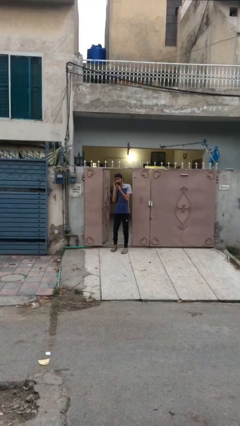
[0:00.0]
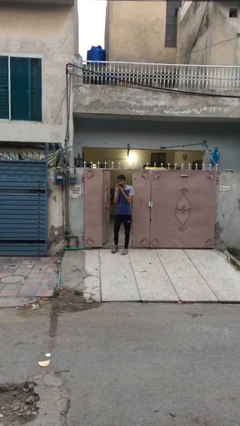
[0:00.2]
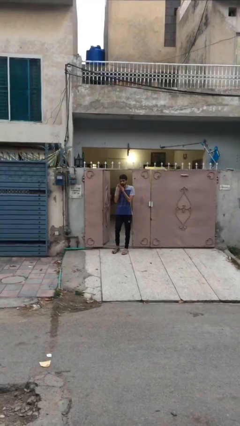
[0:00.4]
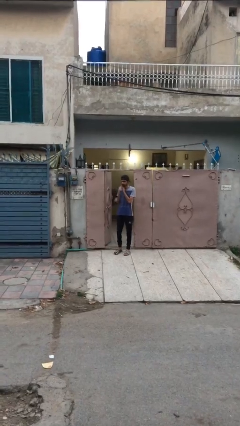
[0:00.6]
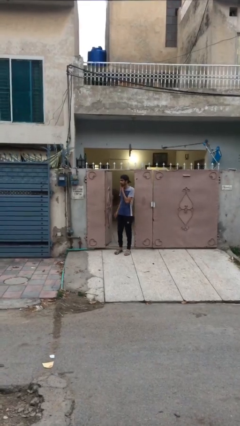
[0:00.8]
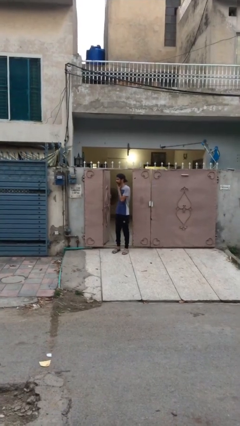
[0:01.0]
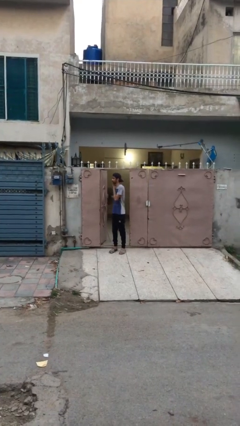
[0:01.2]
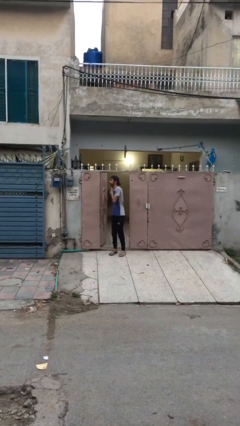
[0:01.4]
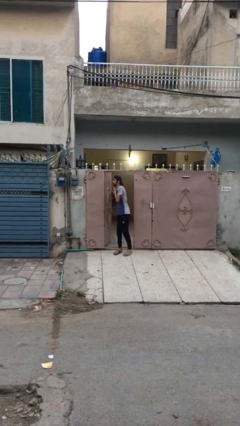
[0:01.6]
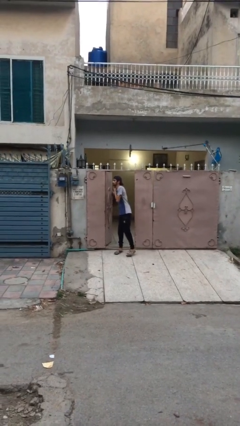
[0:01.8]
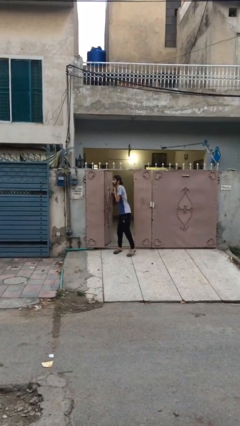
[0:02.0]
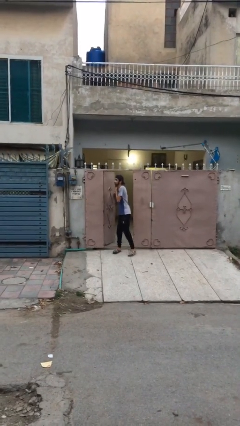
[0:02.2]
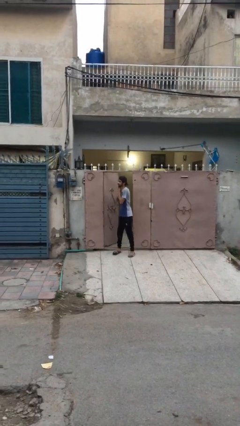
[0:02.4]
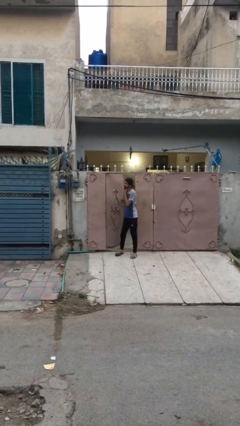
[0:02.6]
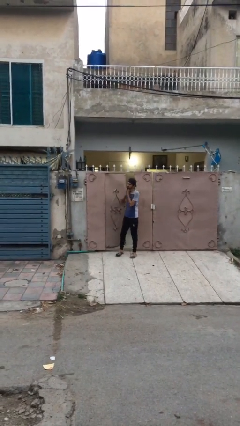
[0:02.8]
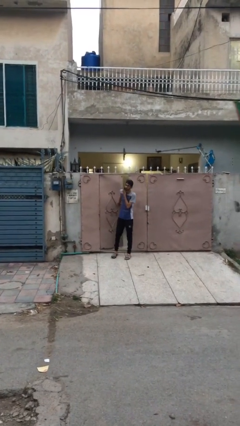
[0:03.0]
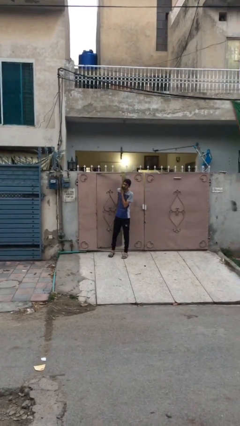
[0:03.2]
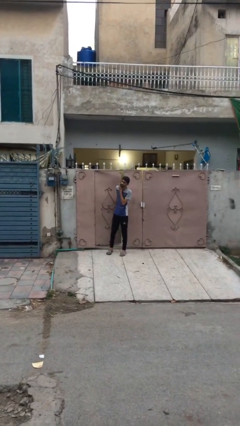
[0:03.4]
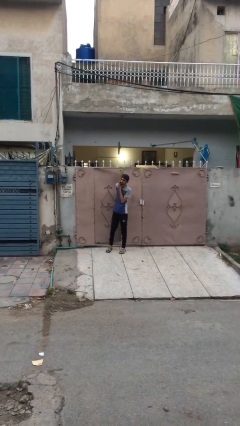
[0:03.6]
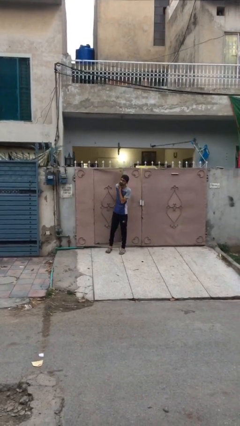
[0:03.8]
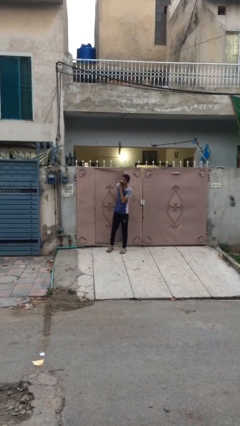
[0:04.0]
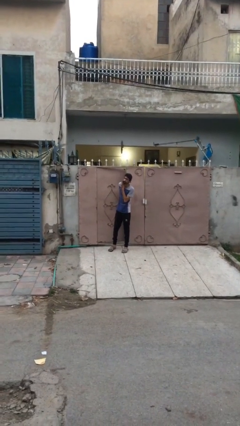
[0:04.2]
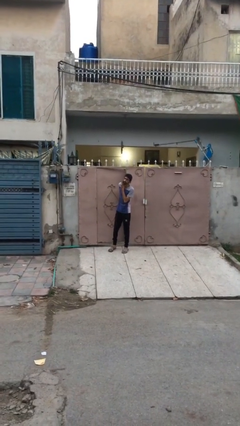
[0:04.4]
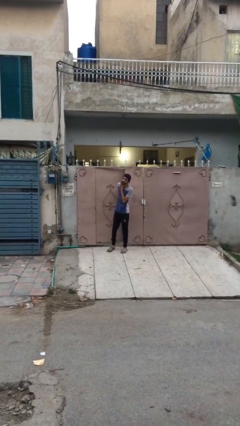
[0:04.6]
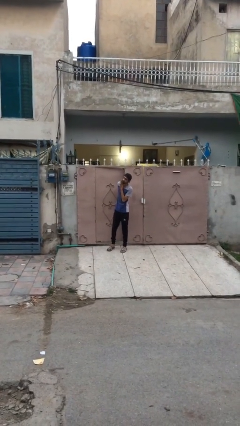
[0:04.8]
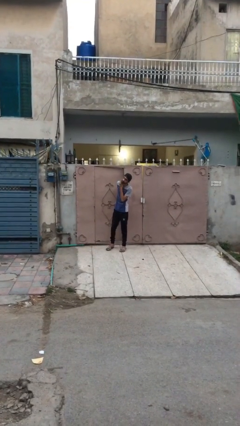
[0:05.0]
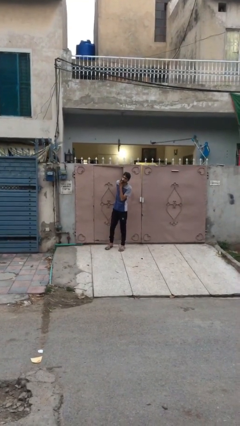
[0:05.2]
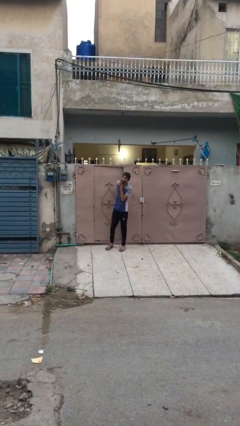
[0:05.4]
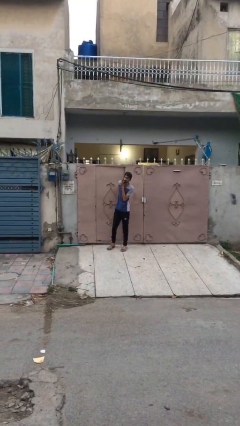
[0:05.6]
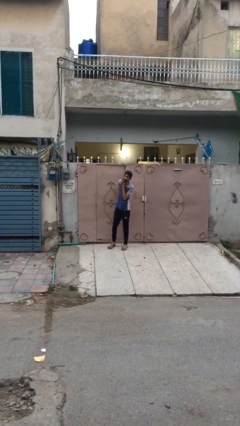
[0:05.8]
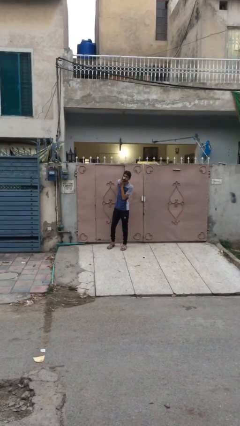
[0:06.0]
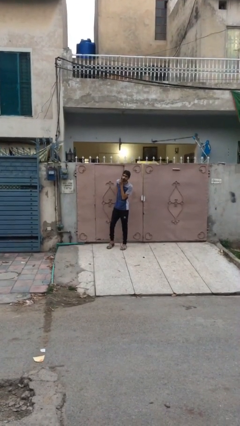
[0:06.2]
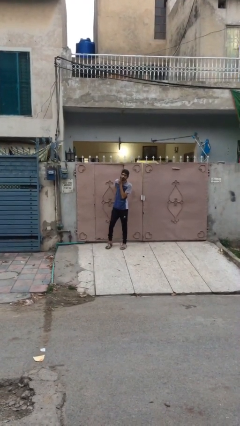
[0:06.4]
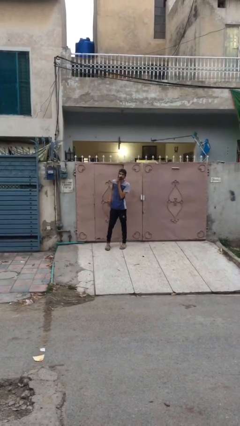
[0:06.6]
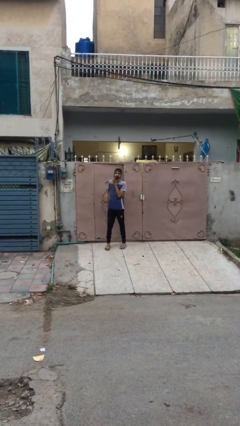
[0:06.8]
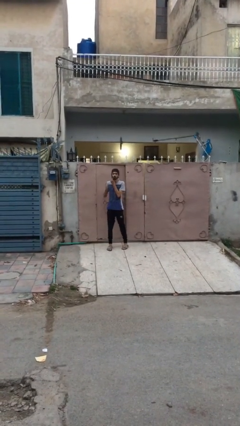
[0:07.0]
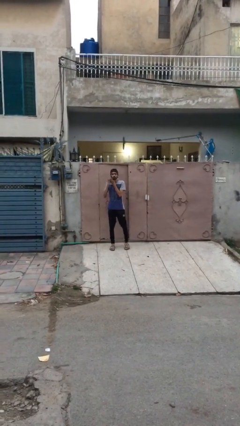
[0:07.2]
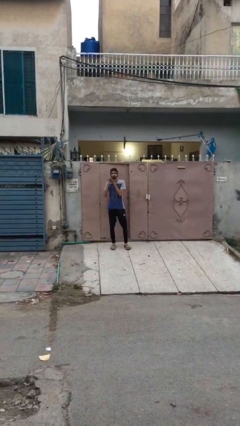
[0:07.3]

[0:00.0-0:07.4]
person closes facility door

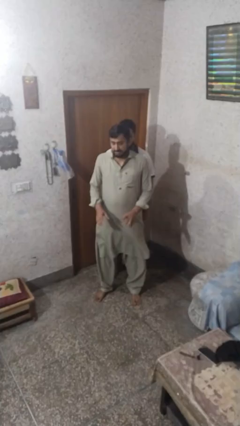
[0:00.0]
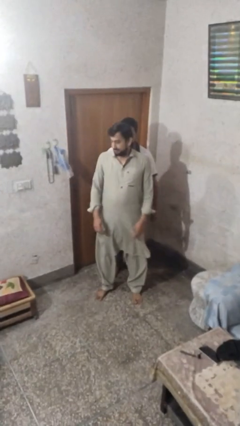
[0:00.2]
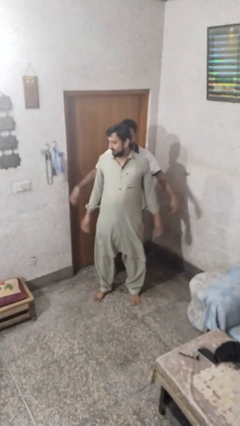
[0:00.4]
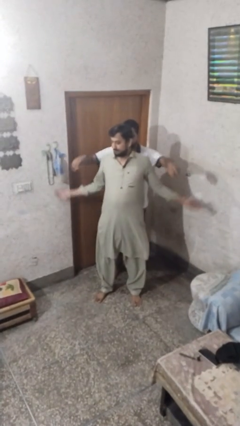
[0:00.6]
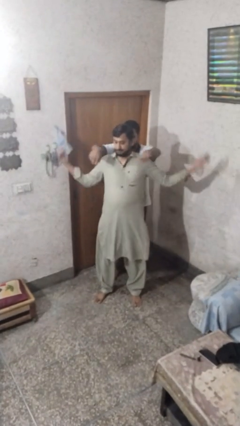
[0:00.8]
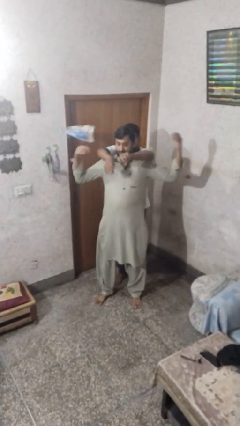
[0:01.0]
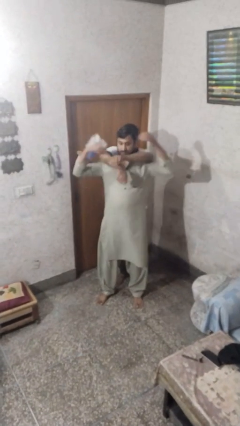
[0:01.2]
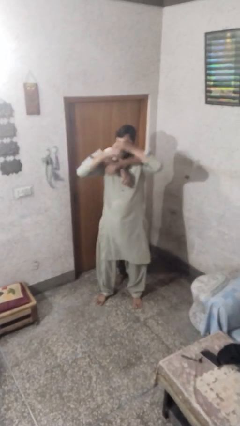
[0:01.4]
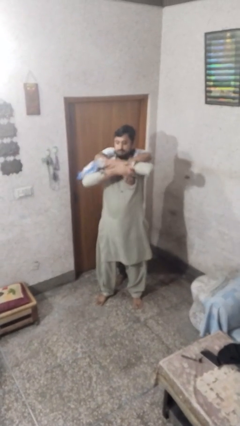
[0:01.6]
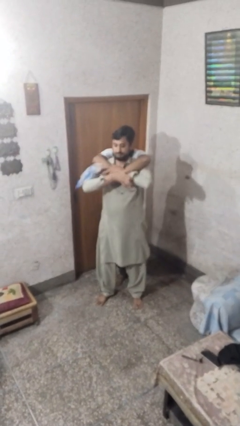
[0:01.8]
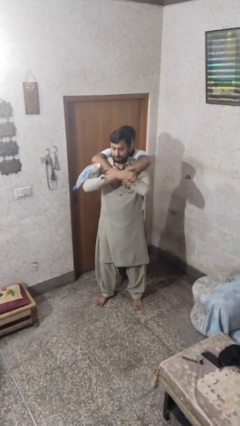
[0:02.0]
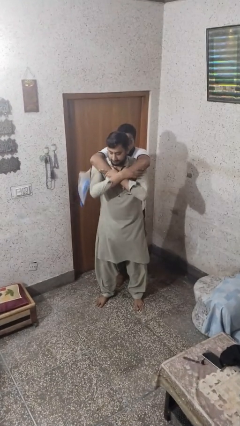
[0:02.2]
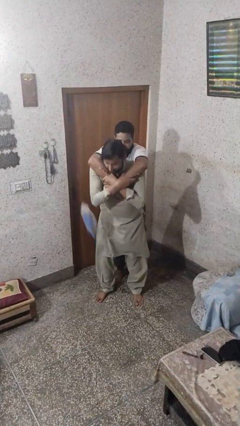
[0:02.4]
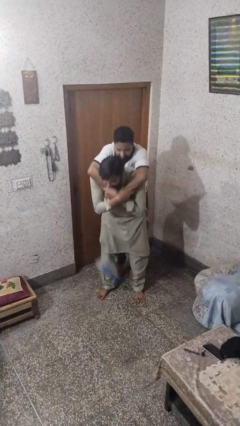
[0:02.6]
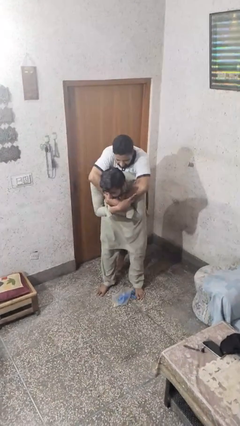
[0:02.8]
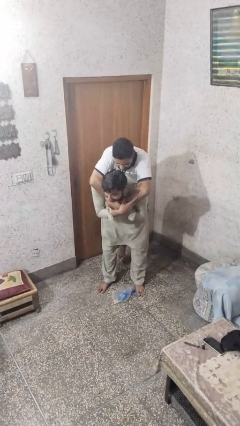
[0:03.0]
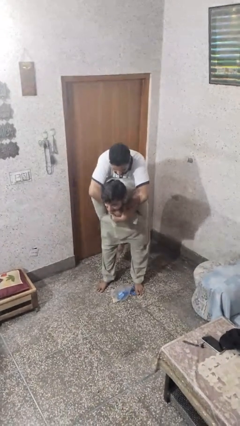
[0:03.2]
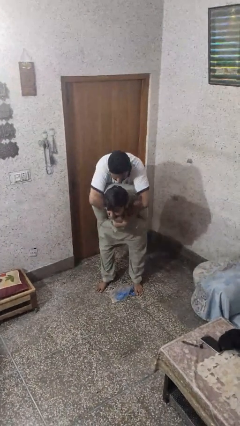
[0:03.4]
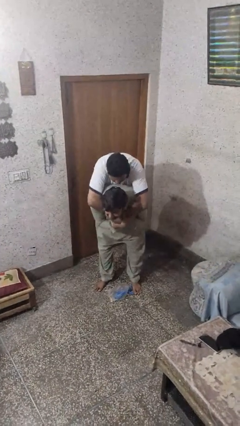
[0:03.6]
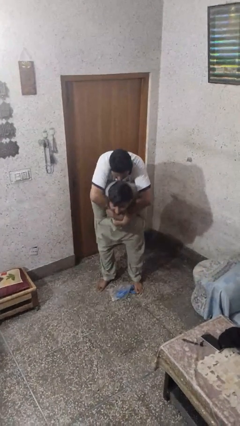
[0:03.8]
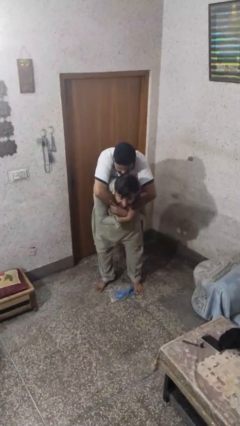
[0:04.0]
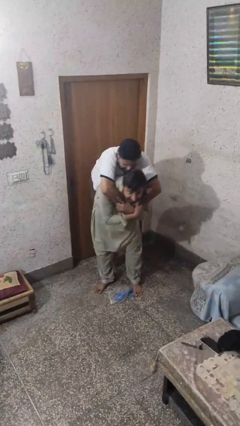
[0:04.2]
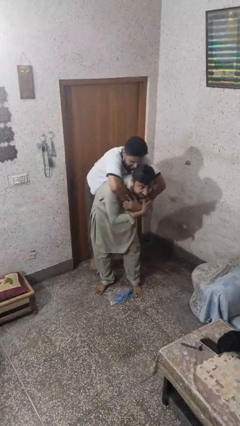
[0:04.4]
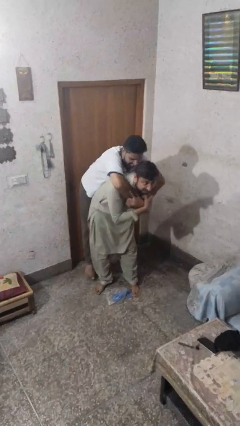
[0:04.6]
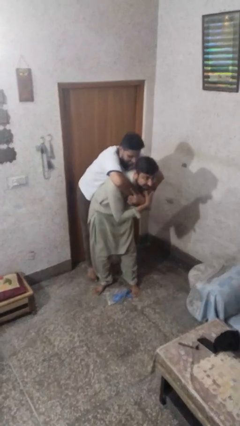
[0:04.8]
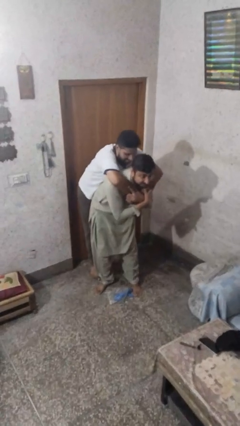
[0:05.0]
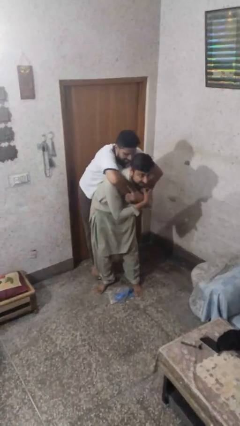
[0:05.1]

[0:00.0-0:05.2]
person carries person on back

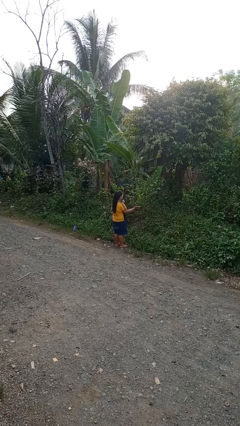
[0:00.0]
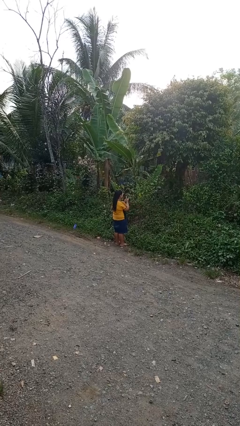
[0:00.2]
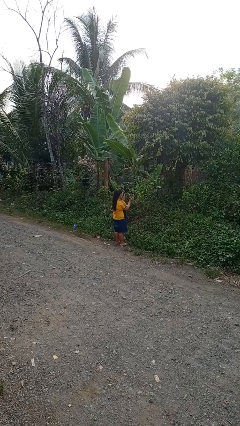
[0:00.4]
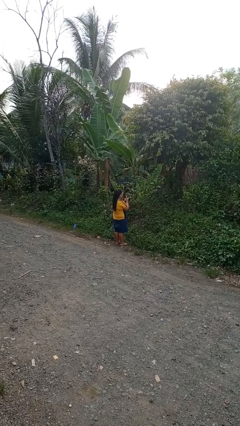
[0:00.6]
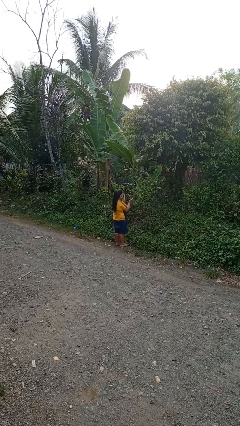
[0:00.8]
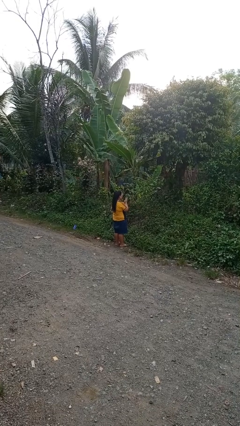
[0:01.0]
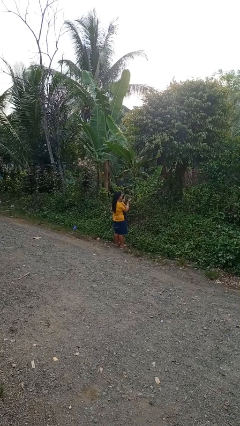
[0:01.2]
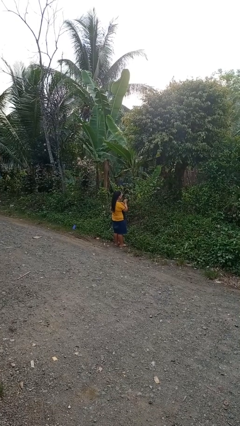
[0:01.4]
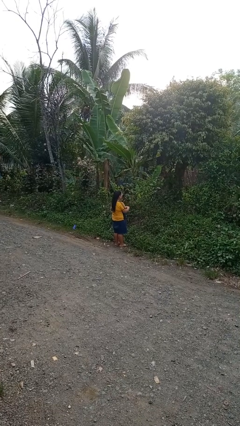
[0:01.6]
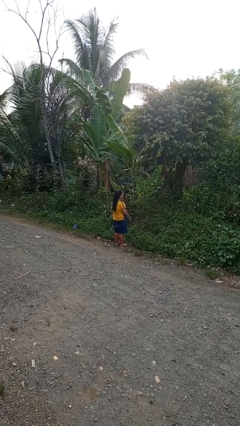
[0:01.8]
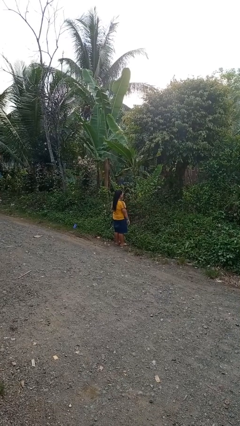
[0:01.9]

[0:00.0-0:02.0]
person claps hands

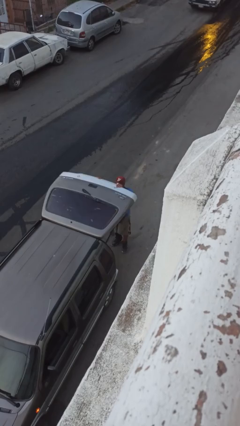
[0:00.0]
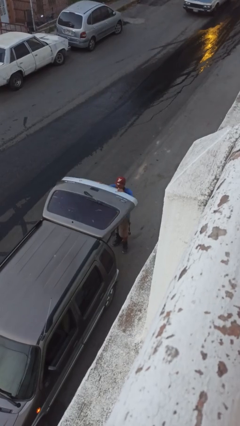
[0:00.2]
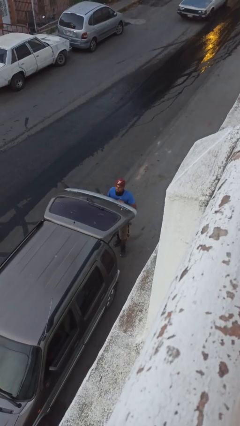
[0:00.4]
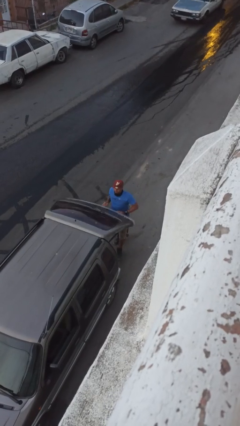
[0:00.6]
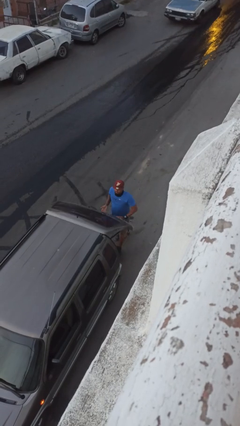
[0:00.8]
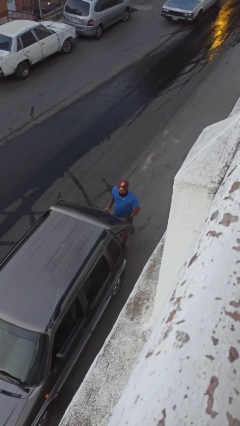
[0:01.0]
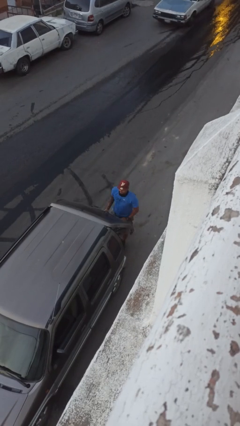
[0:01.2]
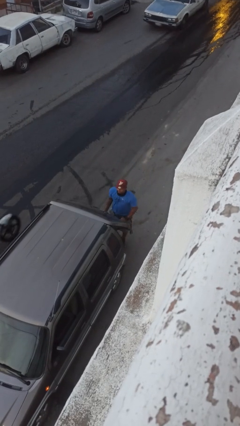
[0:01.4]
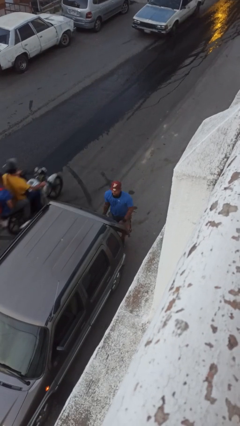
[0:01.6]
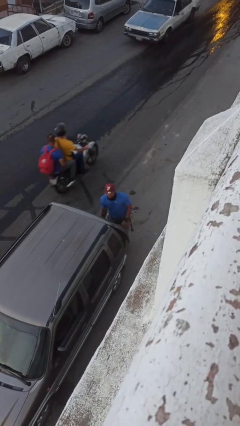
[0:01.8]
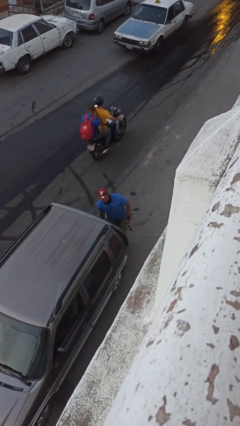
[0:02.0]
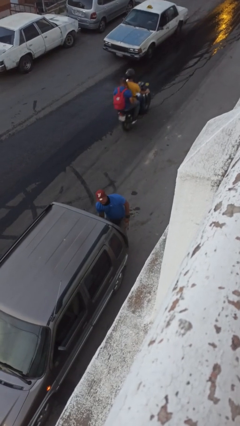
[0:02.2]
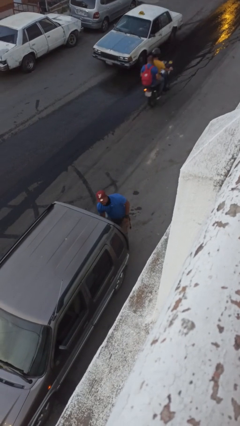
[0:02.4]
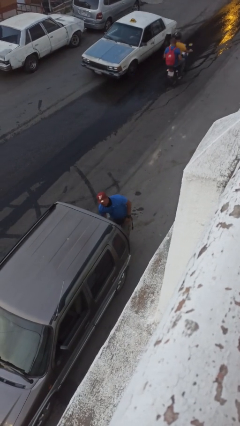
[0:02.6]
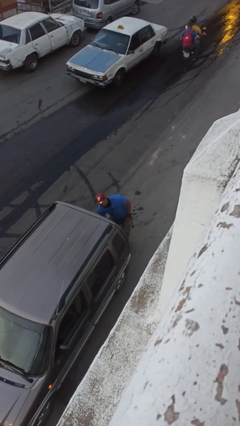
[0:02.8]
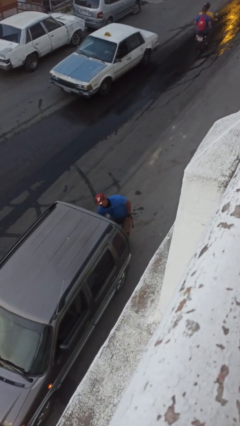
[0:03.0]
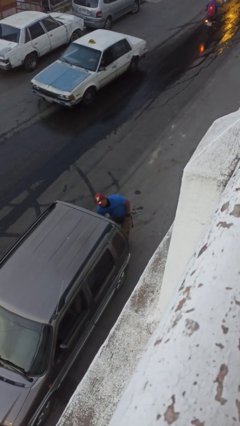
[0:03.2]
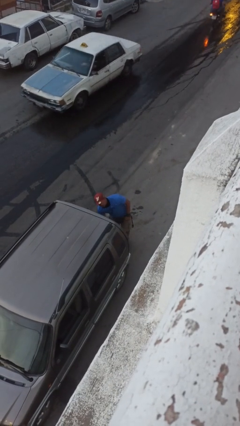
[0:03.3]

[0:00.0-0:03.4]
person closes car trunk
